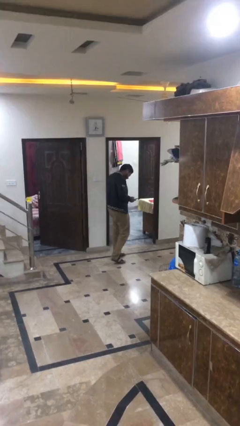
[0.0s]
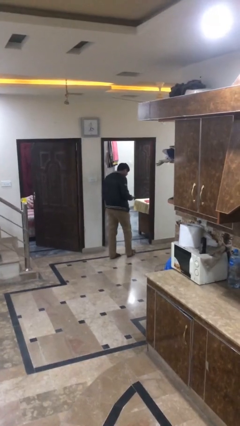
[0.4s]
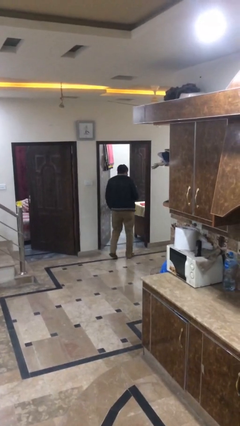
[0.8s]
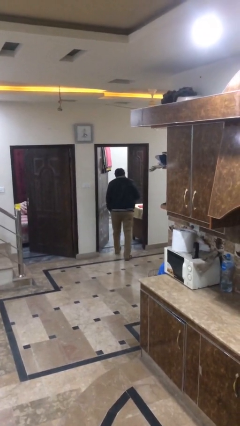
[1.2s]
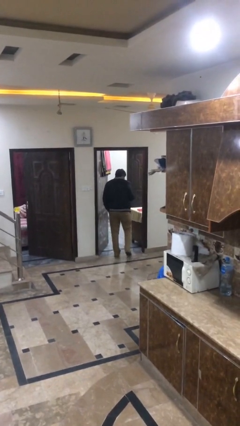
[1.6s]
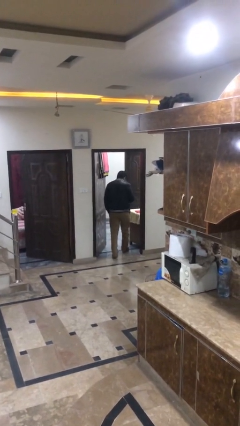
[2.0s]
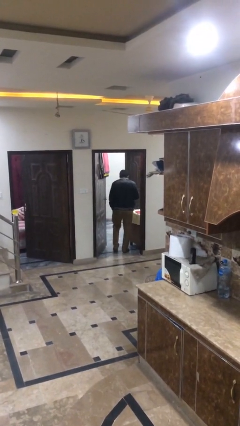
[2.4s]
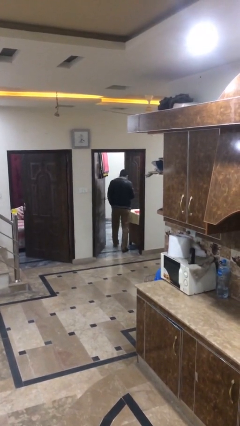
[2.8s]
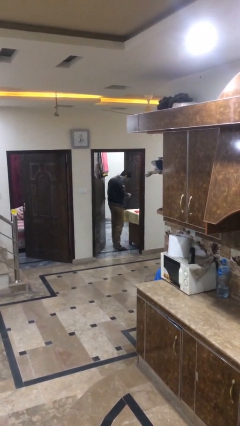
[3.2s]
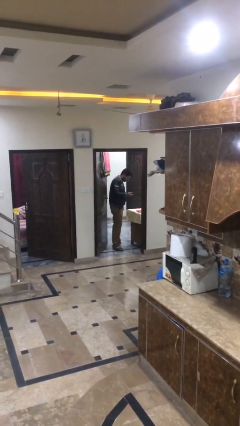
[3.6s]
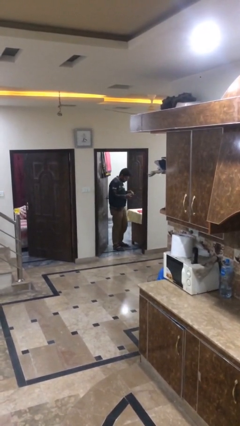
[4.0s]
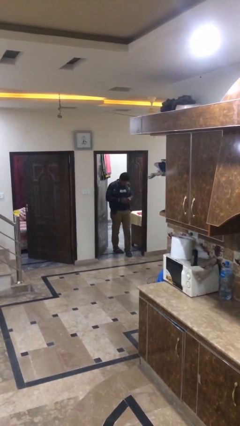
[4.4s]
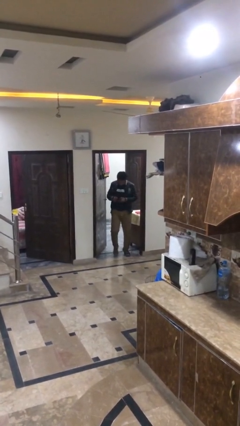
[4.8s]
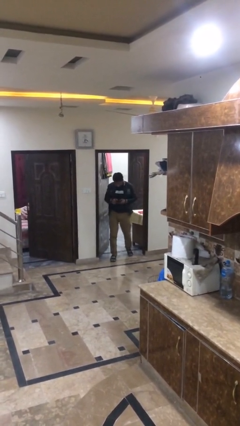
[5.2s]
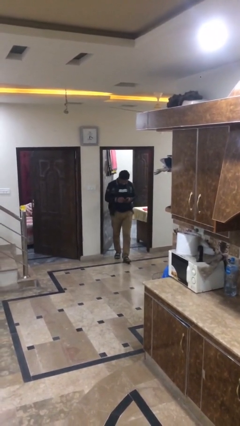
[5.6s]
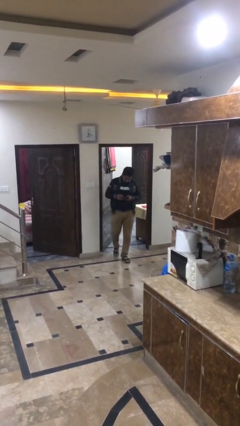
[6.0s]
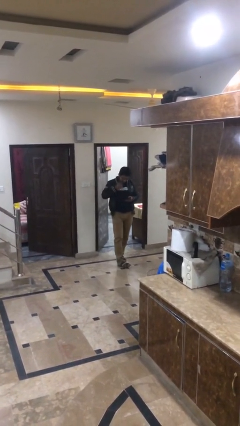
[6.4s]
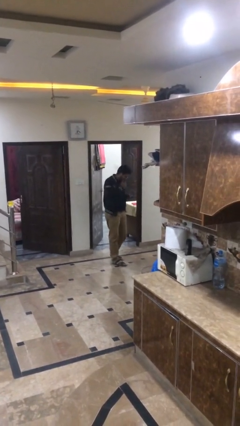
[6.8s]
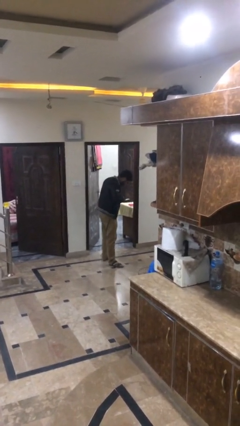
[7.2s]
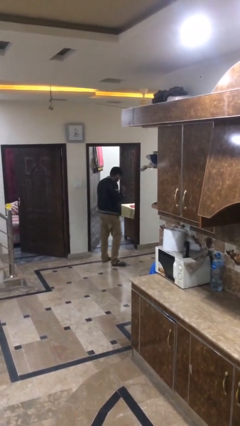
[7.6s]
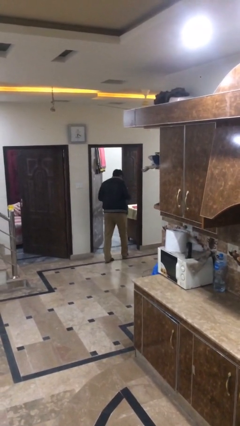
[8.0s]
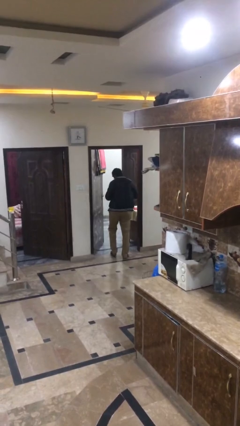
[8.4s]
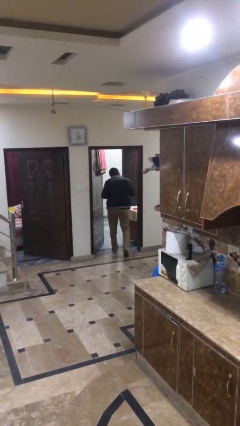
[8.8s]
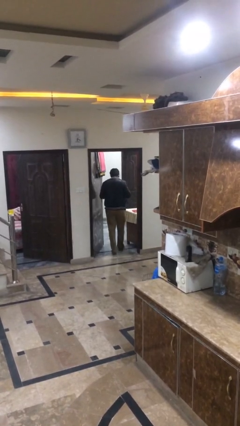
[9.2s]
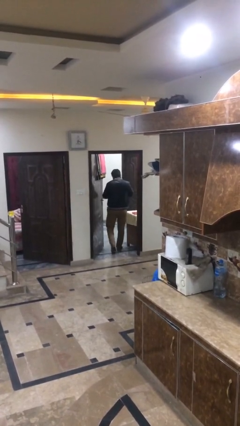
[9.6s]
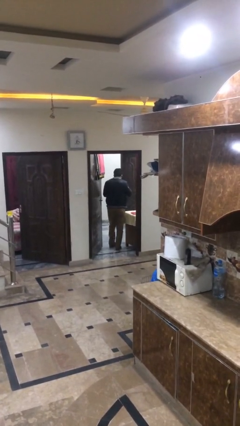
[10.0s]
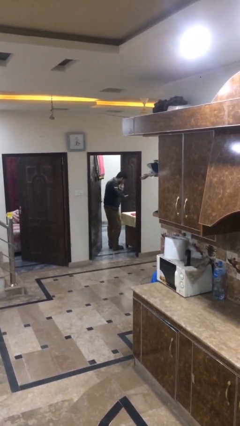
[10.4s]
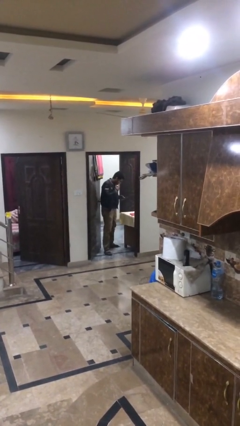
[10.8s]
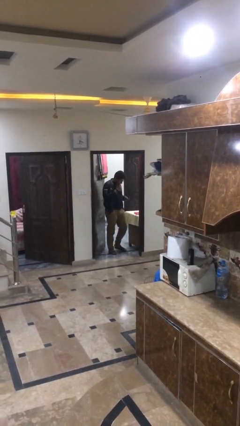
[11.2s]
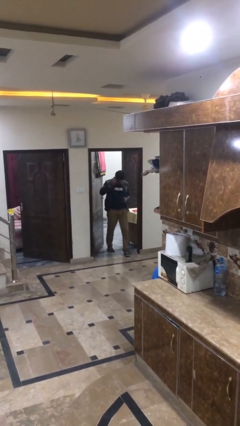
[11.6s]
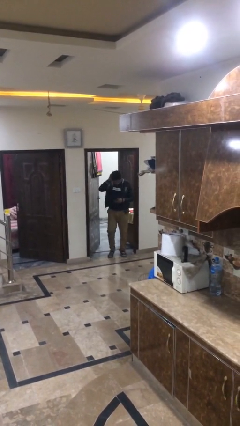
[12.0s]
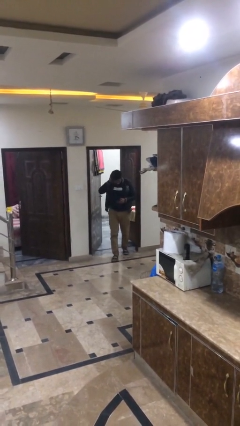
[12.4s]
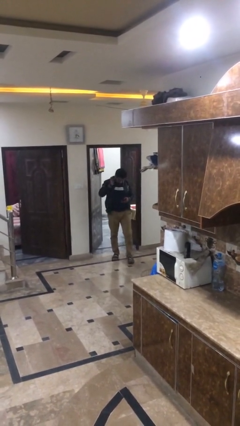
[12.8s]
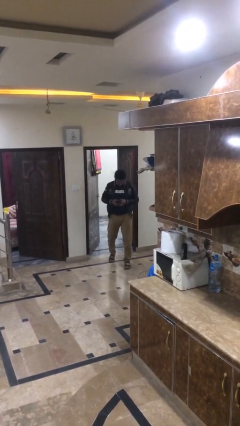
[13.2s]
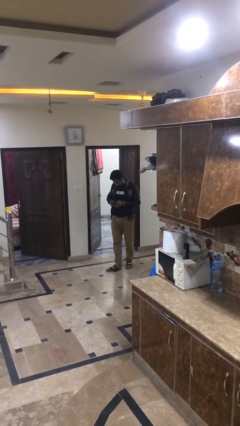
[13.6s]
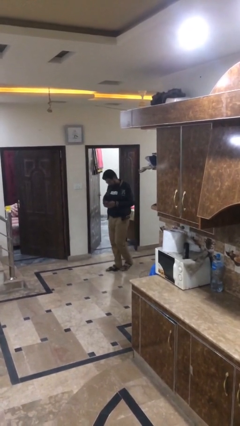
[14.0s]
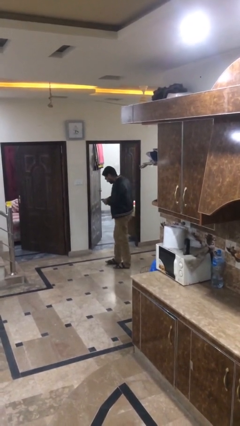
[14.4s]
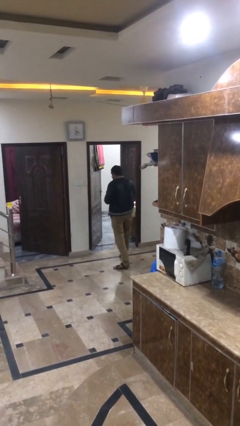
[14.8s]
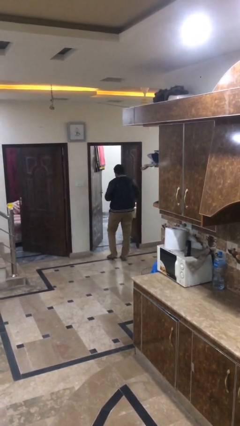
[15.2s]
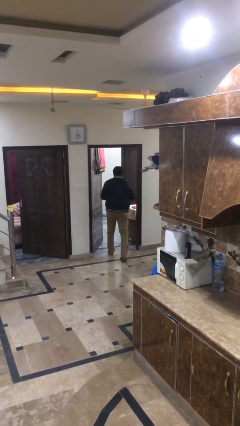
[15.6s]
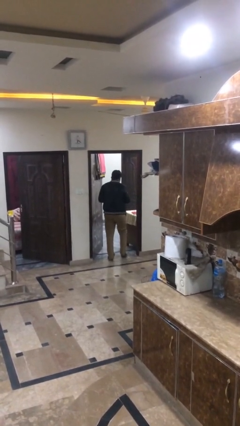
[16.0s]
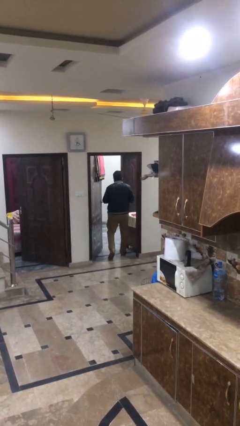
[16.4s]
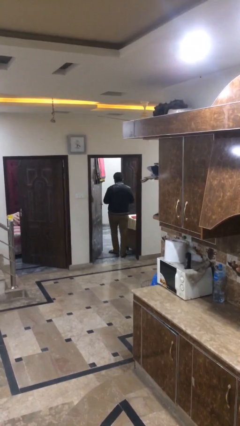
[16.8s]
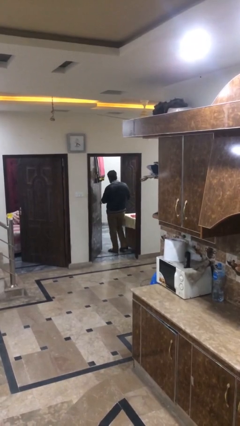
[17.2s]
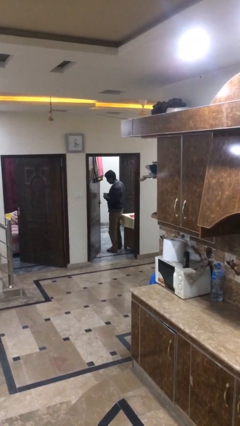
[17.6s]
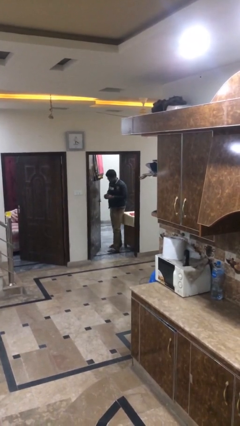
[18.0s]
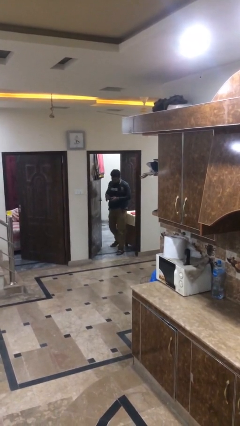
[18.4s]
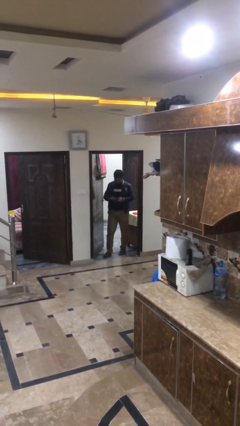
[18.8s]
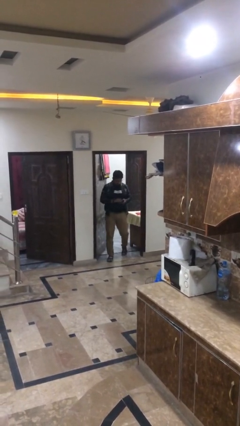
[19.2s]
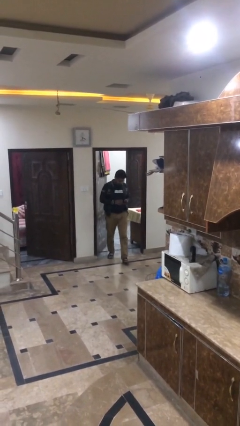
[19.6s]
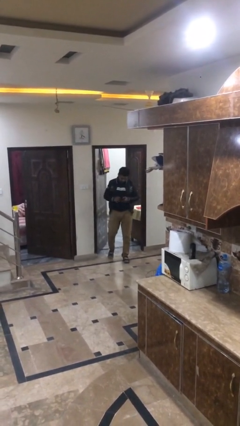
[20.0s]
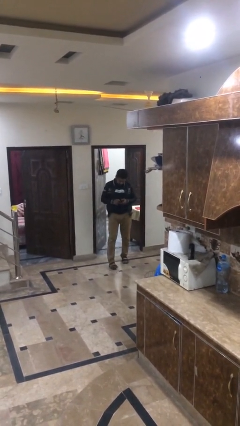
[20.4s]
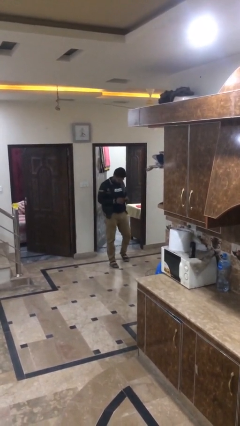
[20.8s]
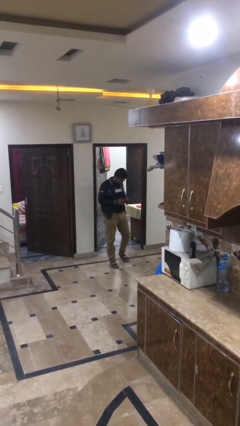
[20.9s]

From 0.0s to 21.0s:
person texts on phone

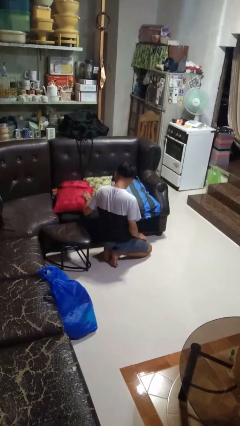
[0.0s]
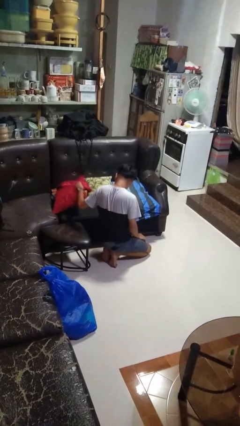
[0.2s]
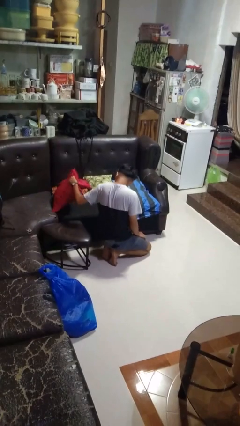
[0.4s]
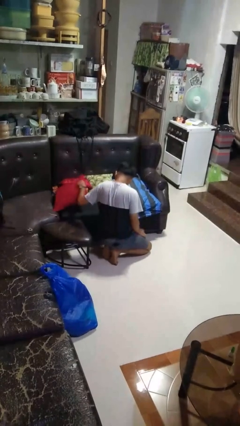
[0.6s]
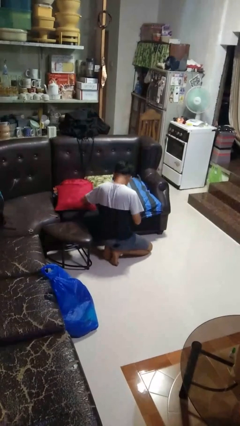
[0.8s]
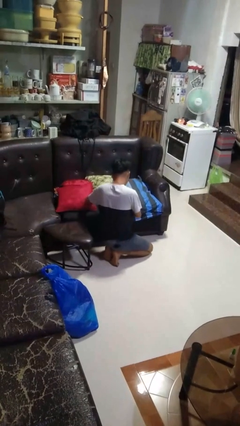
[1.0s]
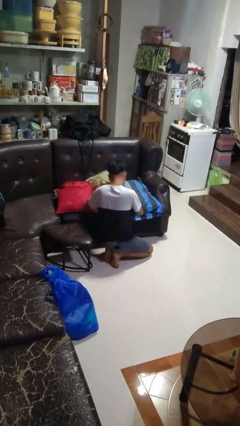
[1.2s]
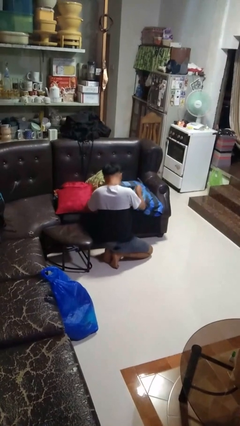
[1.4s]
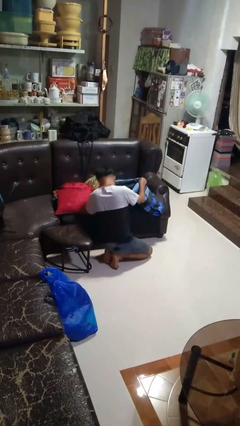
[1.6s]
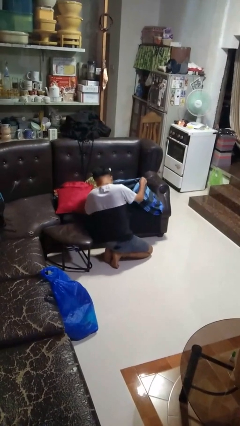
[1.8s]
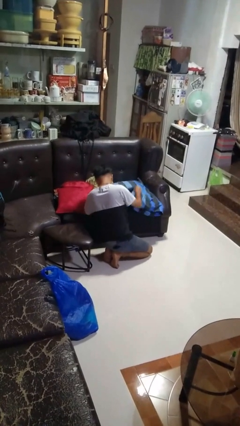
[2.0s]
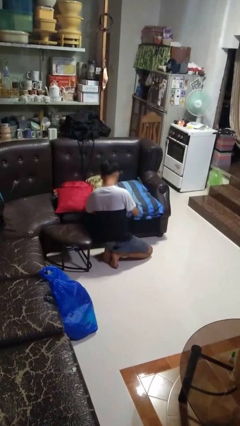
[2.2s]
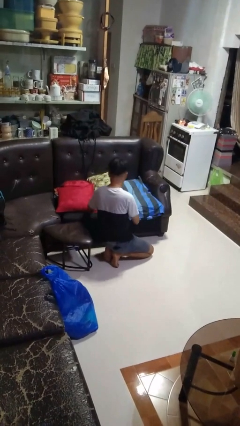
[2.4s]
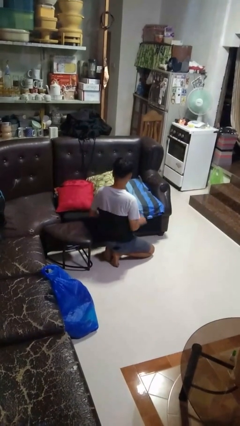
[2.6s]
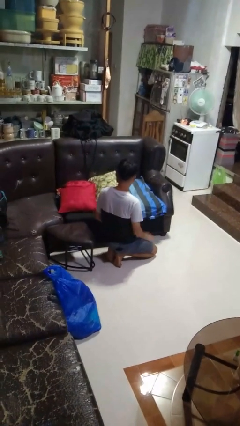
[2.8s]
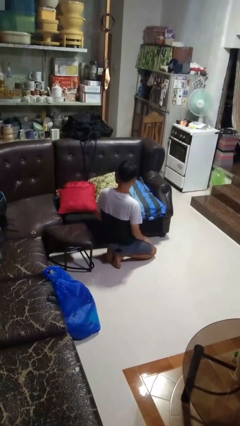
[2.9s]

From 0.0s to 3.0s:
person searches in couch

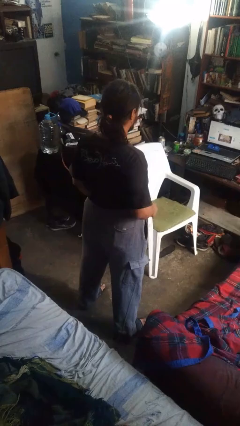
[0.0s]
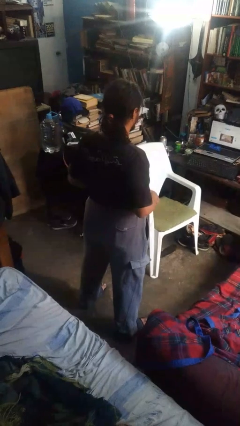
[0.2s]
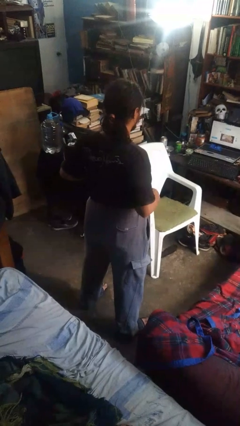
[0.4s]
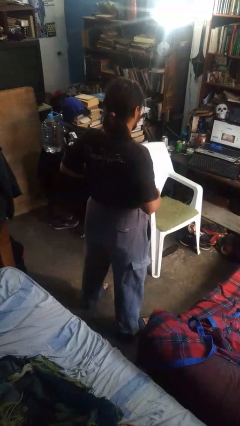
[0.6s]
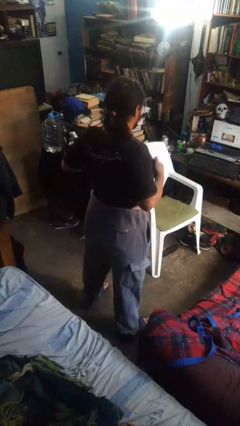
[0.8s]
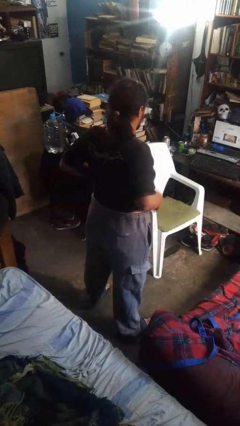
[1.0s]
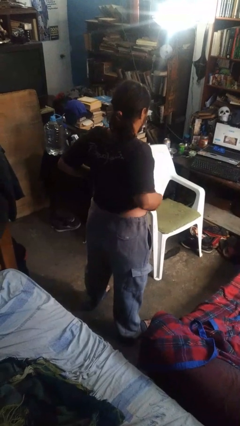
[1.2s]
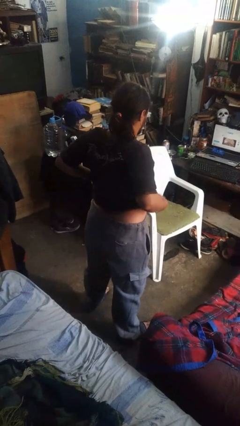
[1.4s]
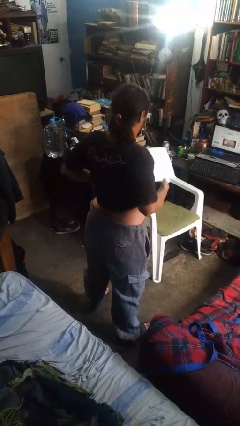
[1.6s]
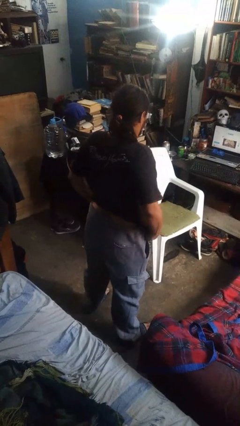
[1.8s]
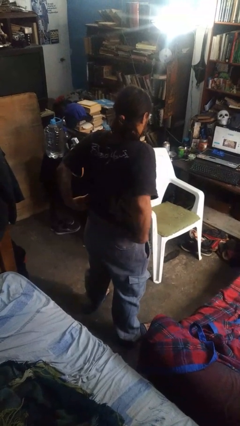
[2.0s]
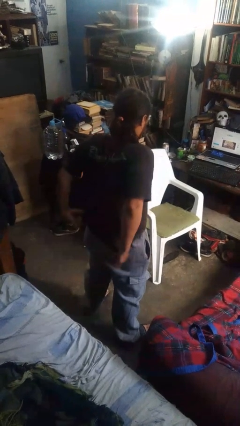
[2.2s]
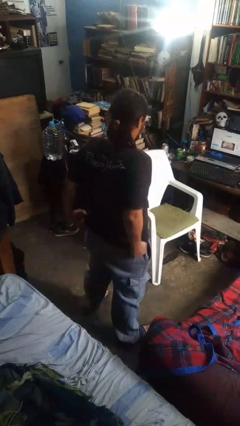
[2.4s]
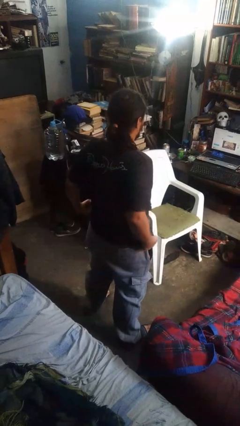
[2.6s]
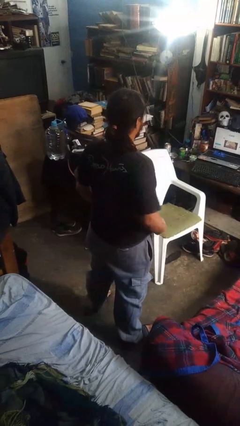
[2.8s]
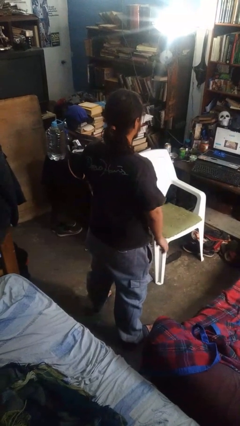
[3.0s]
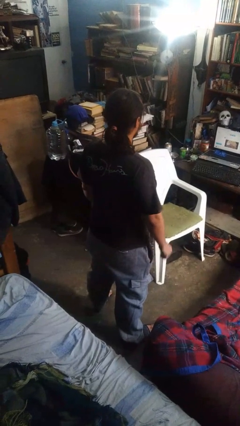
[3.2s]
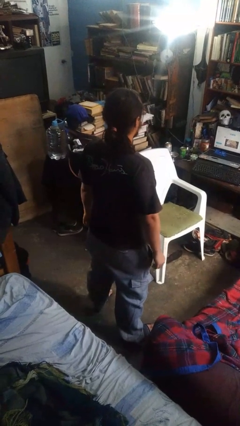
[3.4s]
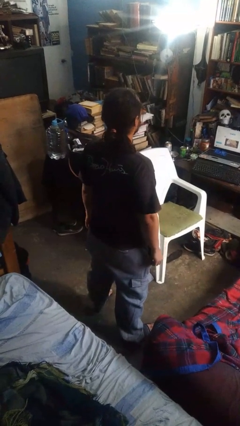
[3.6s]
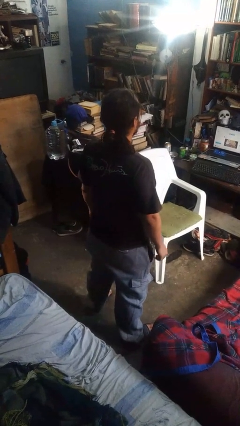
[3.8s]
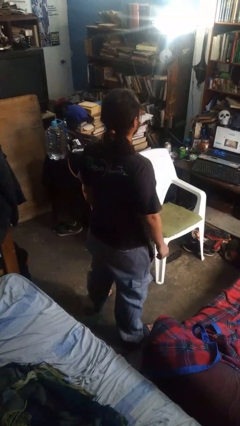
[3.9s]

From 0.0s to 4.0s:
person untucks shirt

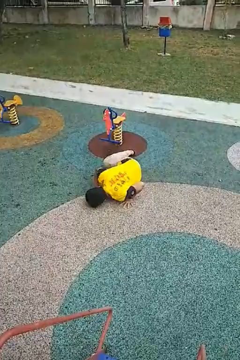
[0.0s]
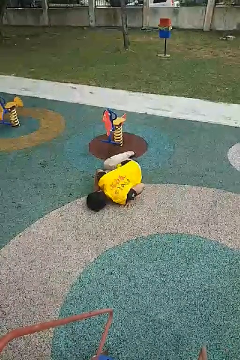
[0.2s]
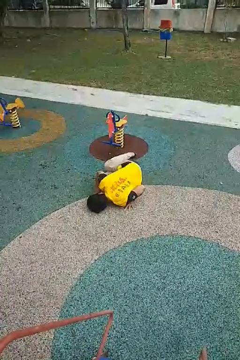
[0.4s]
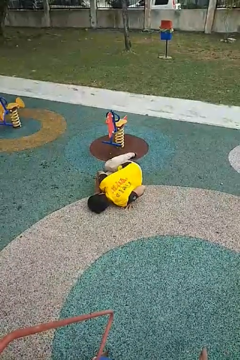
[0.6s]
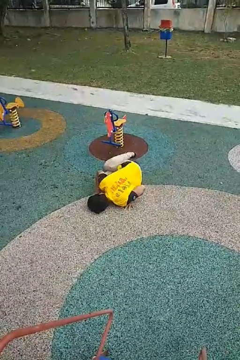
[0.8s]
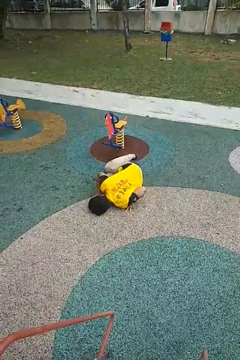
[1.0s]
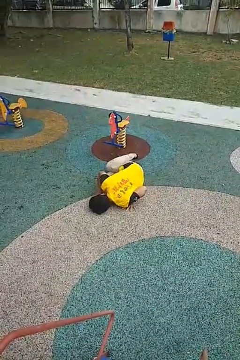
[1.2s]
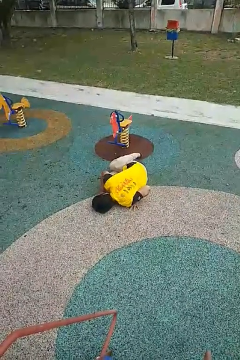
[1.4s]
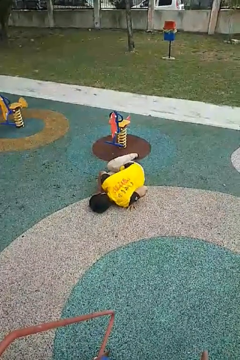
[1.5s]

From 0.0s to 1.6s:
person lies down on floor
